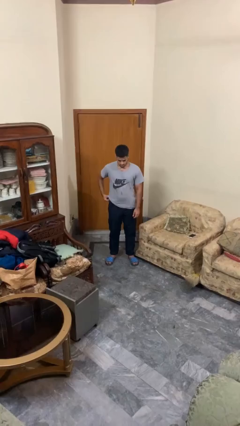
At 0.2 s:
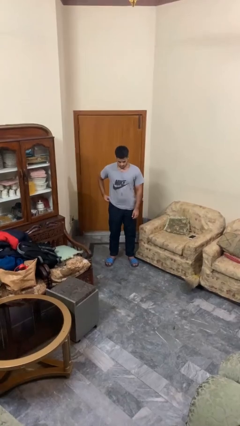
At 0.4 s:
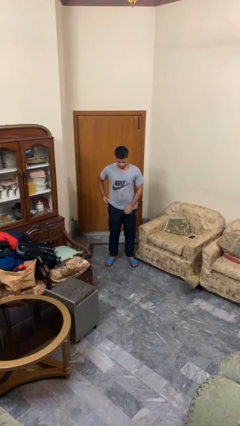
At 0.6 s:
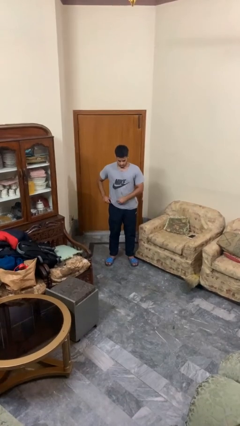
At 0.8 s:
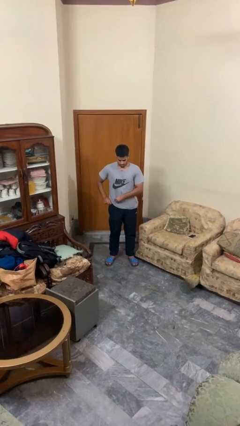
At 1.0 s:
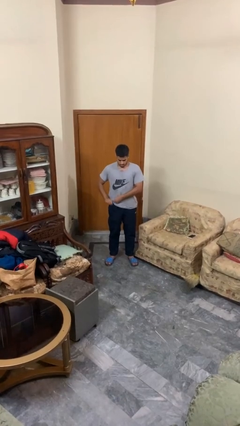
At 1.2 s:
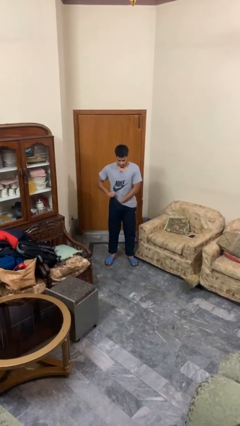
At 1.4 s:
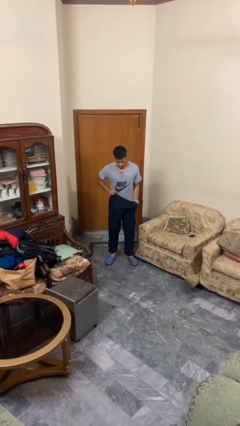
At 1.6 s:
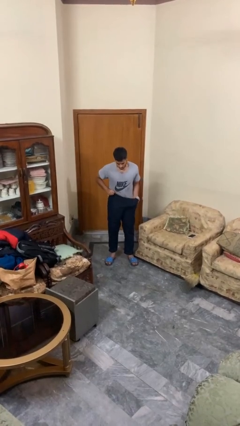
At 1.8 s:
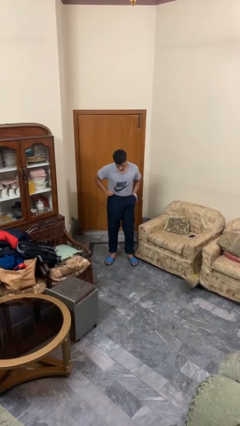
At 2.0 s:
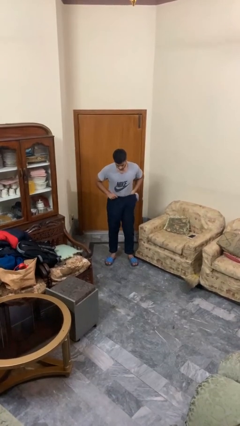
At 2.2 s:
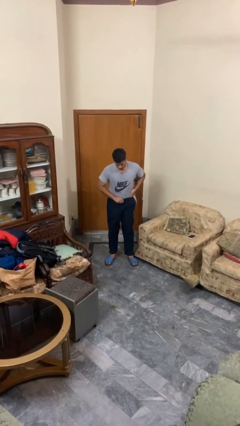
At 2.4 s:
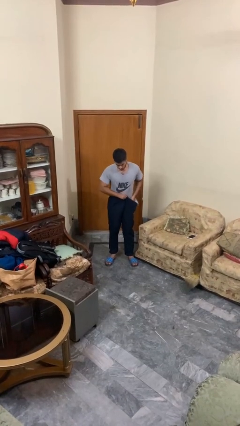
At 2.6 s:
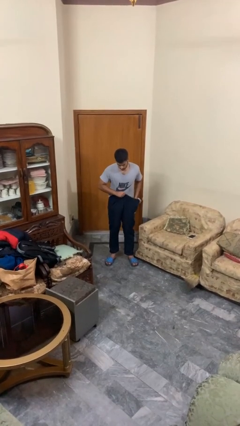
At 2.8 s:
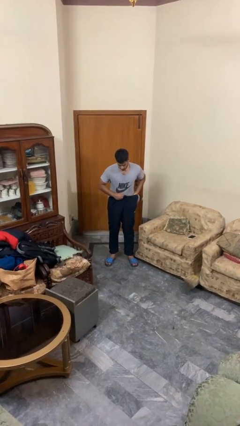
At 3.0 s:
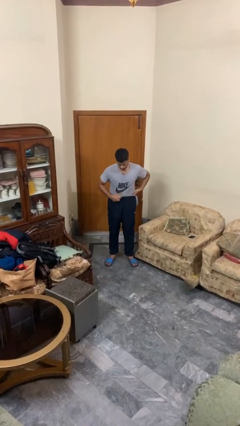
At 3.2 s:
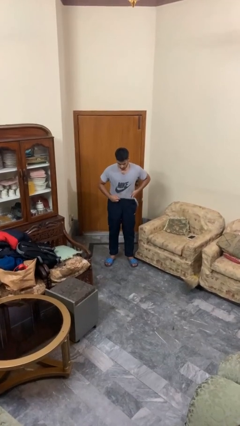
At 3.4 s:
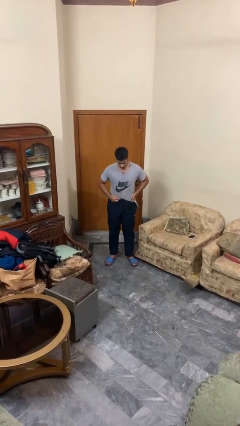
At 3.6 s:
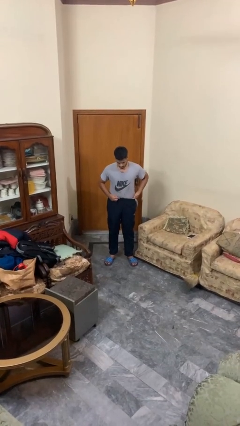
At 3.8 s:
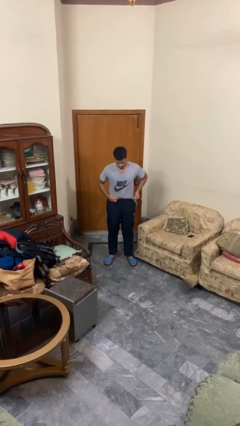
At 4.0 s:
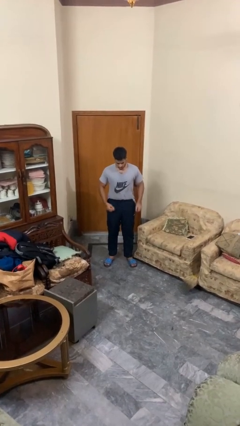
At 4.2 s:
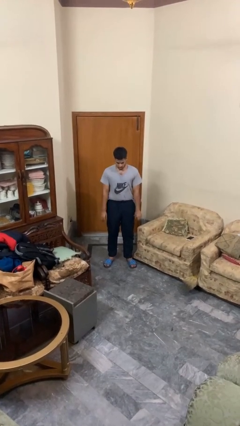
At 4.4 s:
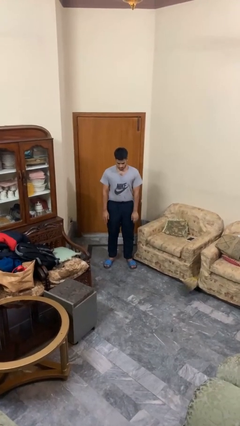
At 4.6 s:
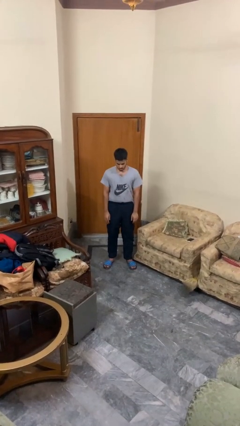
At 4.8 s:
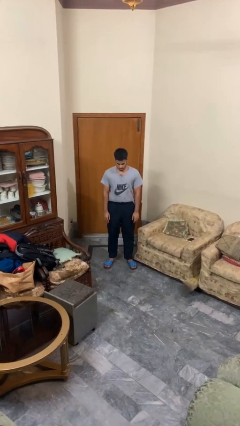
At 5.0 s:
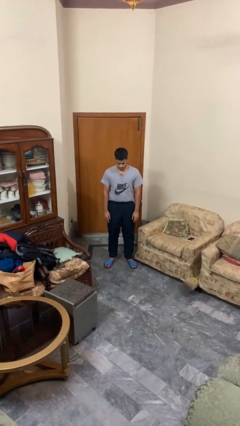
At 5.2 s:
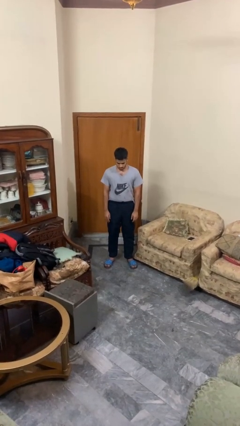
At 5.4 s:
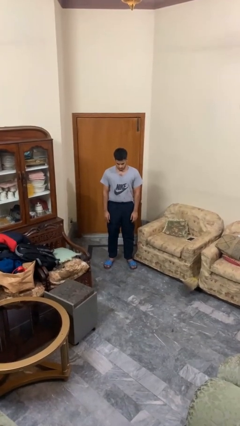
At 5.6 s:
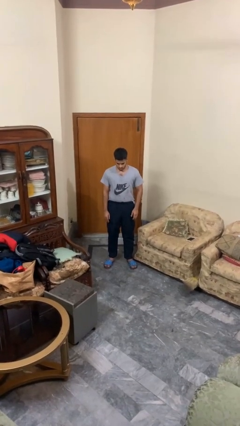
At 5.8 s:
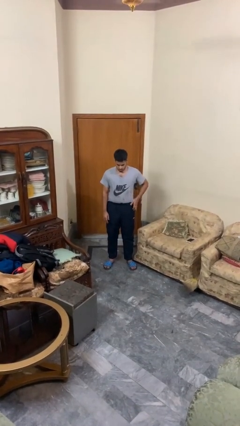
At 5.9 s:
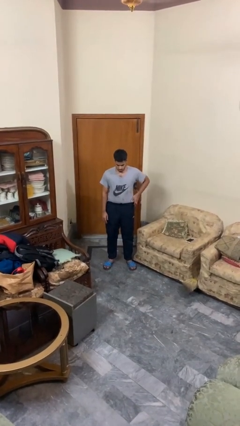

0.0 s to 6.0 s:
person tucks in shirt

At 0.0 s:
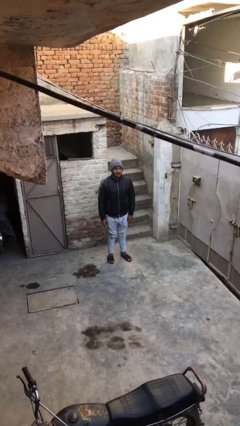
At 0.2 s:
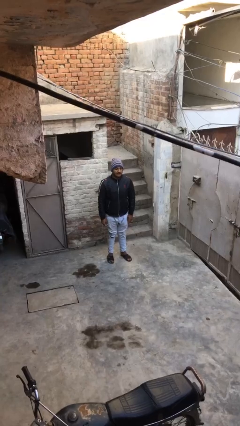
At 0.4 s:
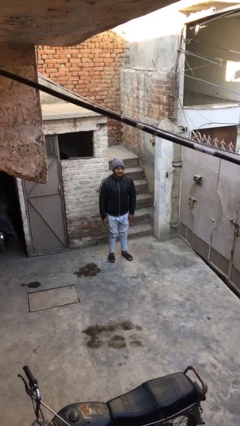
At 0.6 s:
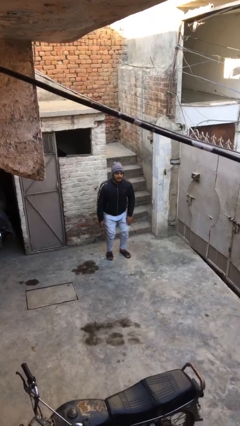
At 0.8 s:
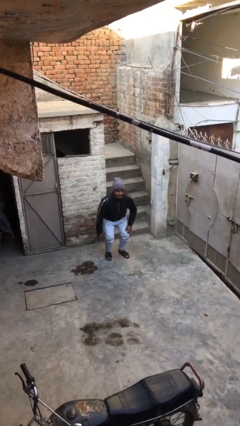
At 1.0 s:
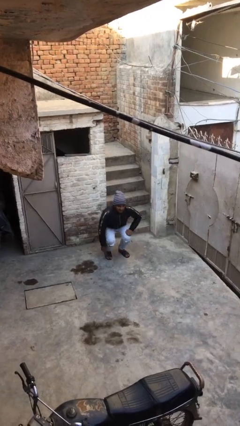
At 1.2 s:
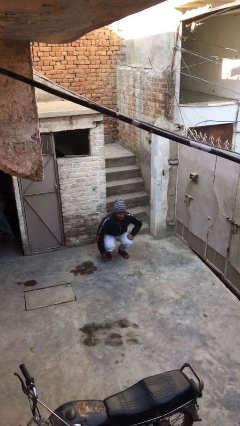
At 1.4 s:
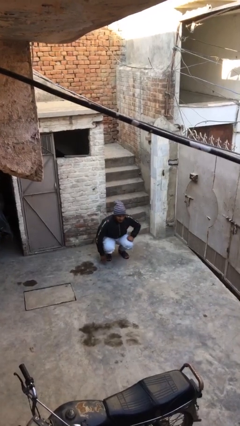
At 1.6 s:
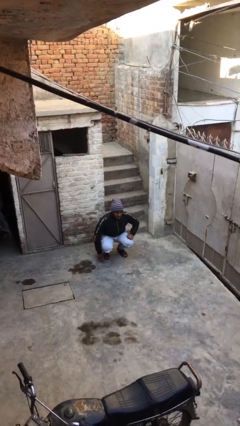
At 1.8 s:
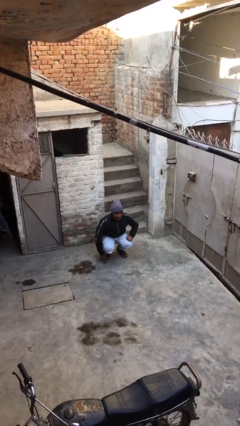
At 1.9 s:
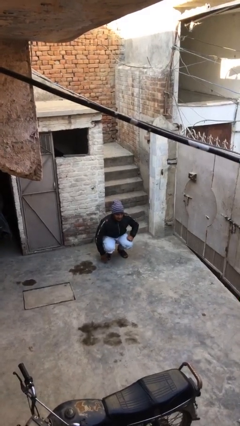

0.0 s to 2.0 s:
person sits down

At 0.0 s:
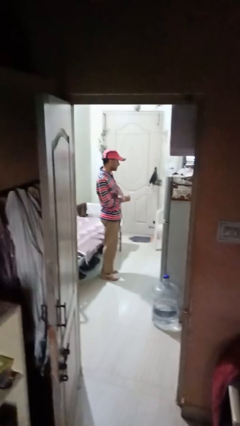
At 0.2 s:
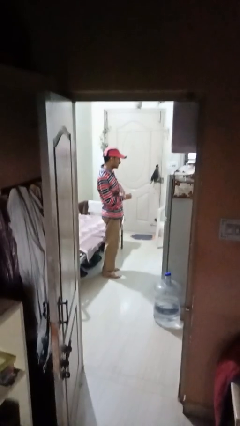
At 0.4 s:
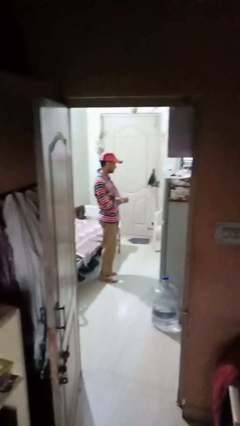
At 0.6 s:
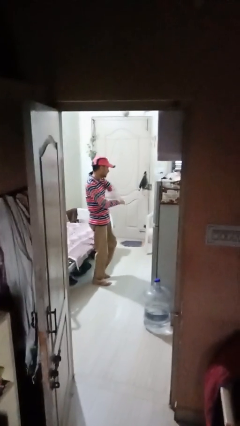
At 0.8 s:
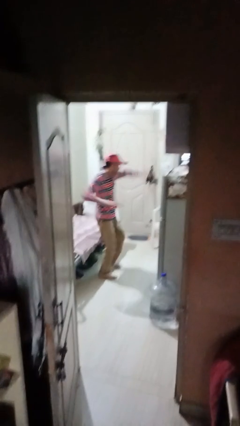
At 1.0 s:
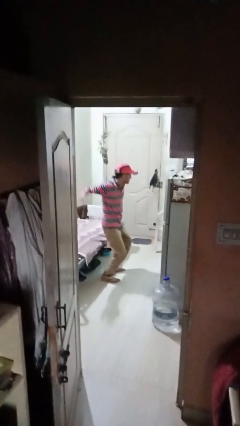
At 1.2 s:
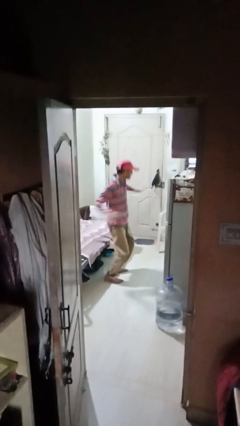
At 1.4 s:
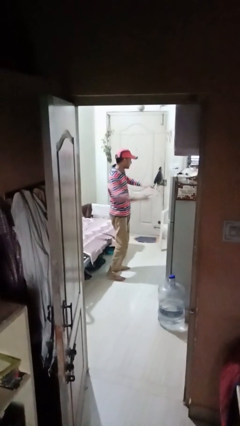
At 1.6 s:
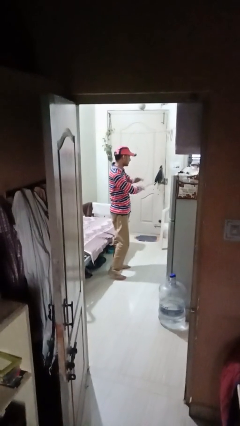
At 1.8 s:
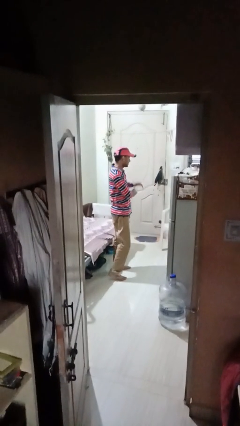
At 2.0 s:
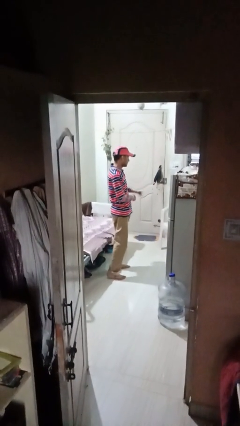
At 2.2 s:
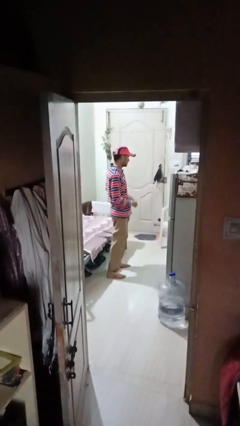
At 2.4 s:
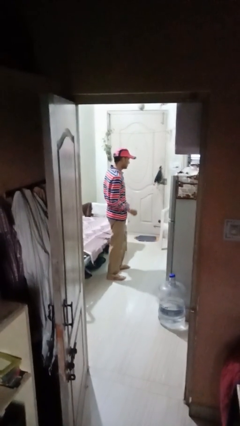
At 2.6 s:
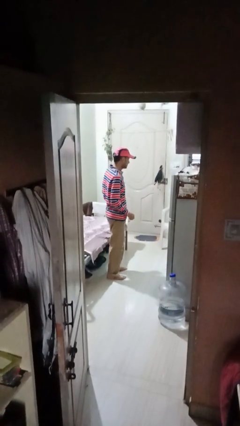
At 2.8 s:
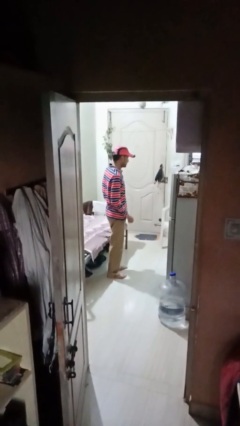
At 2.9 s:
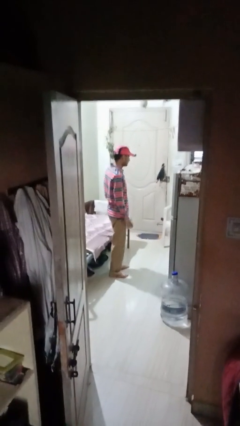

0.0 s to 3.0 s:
person karate chop

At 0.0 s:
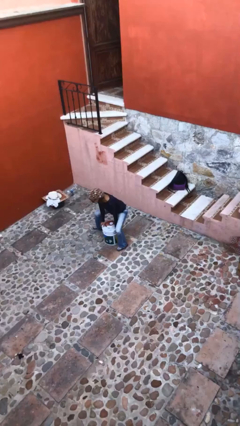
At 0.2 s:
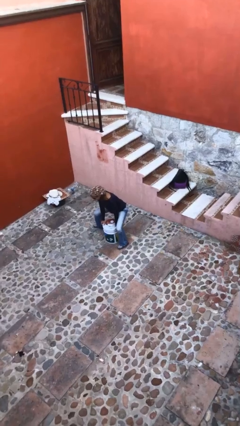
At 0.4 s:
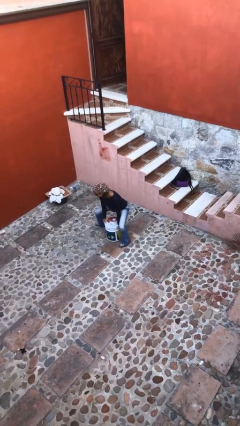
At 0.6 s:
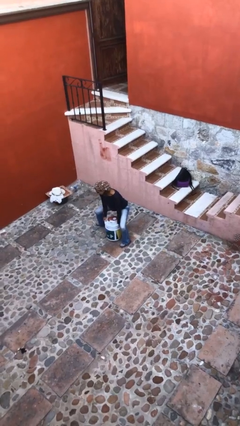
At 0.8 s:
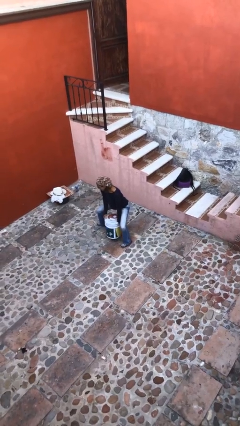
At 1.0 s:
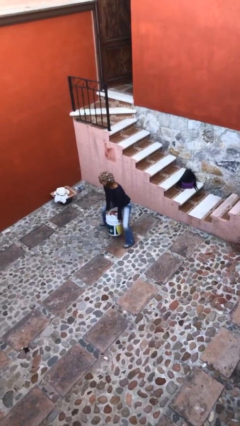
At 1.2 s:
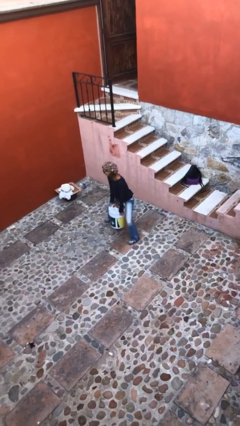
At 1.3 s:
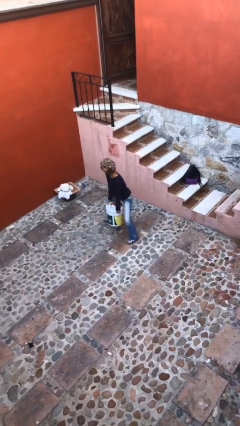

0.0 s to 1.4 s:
person picks up object from floor

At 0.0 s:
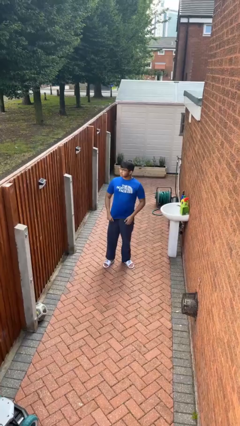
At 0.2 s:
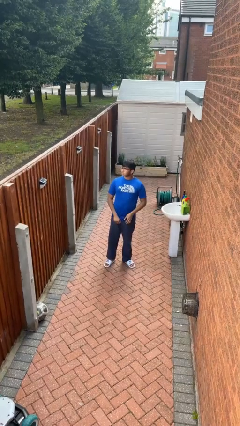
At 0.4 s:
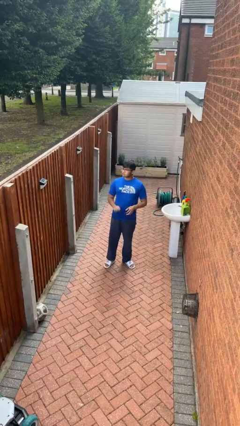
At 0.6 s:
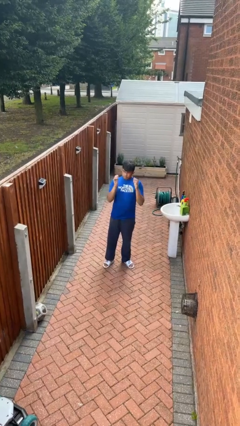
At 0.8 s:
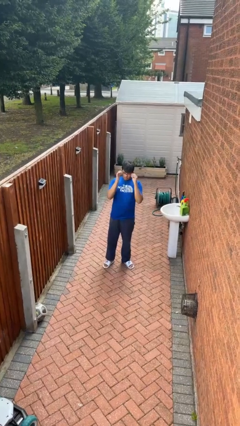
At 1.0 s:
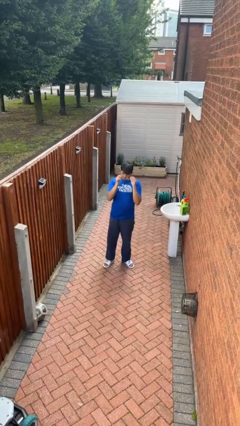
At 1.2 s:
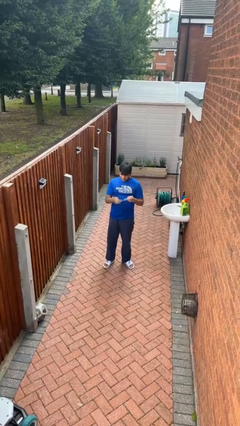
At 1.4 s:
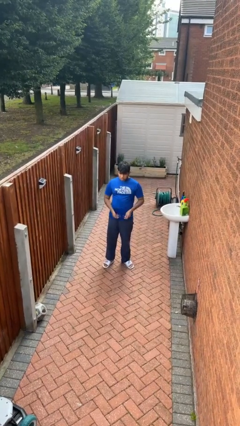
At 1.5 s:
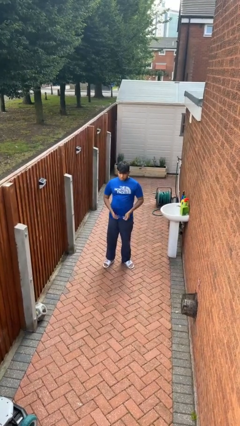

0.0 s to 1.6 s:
person takes off glasses

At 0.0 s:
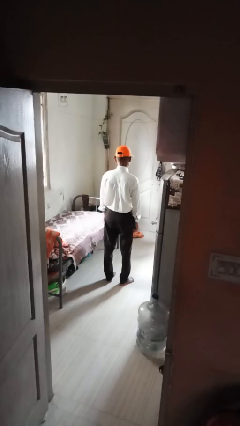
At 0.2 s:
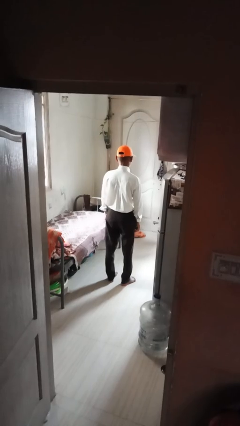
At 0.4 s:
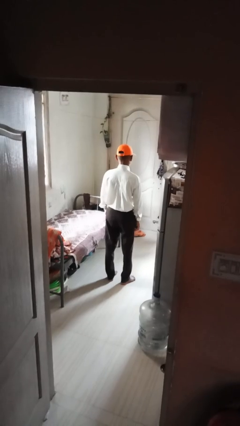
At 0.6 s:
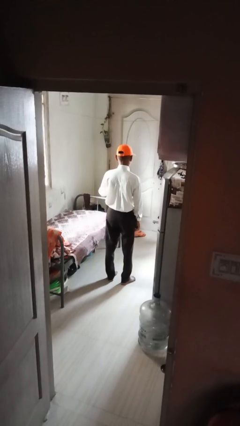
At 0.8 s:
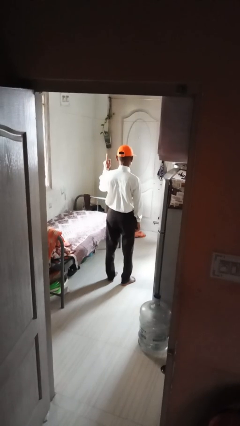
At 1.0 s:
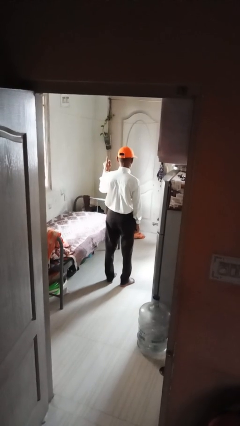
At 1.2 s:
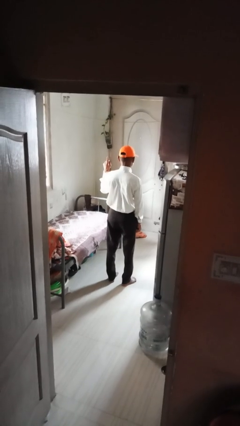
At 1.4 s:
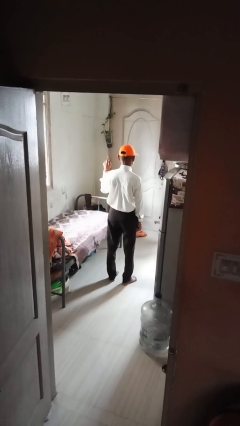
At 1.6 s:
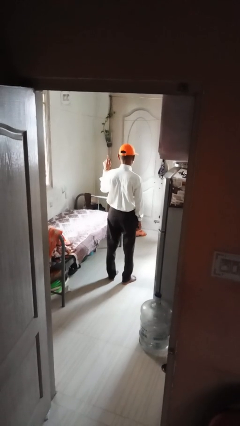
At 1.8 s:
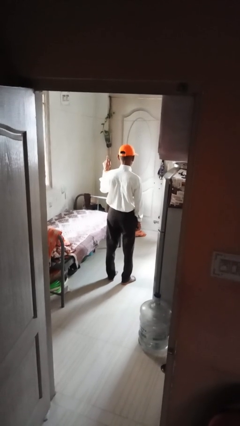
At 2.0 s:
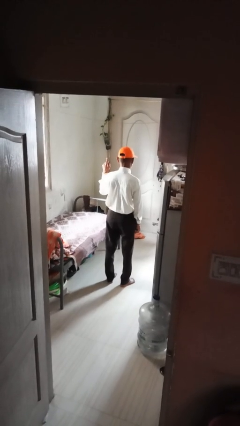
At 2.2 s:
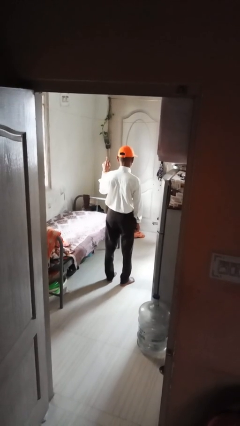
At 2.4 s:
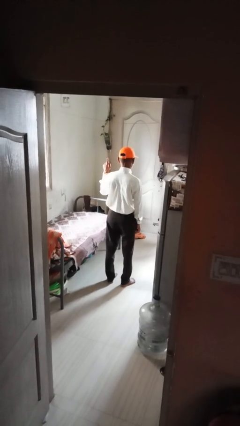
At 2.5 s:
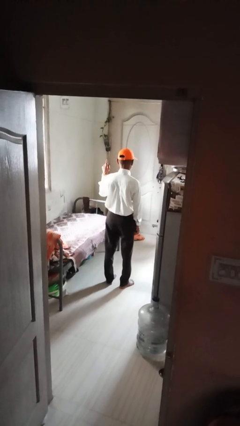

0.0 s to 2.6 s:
person gestures number one

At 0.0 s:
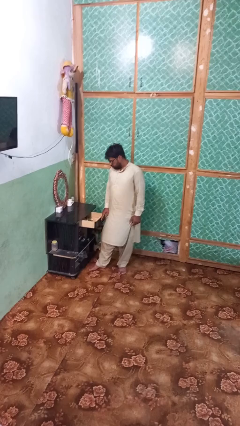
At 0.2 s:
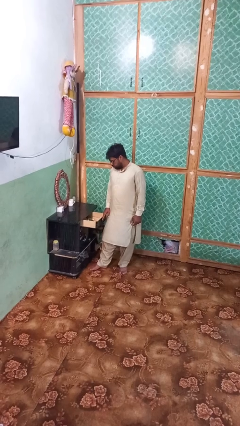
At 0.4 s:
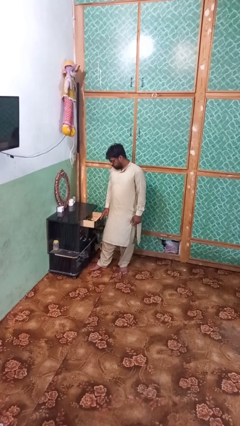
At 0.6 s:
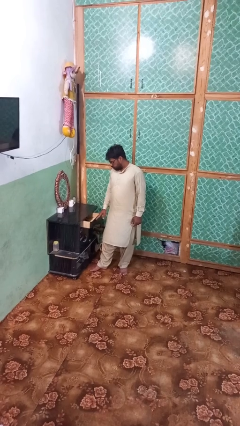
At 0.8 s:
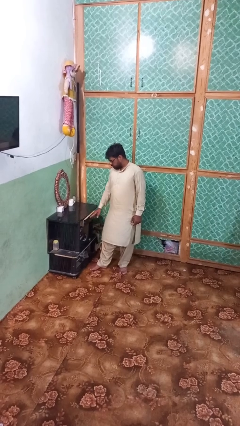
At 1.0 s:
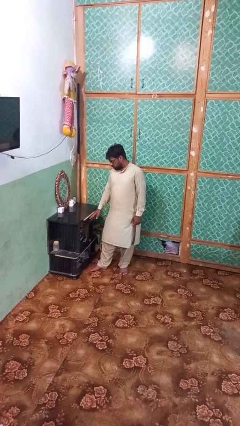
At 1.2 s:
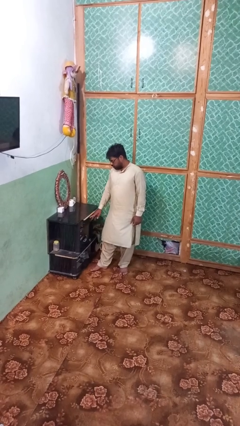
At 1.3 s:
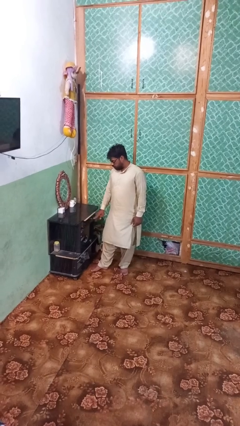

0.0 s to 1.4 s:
person closes dresser drawer
